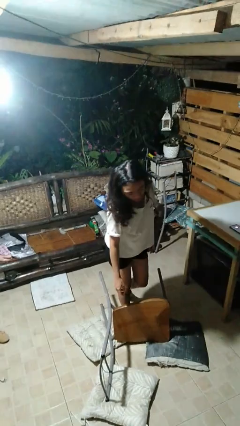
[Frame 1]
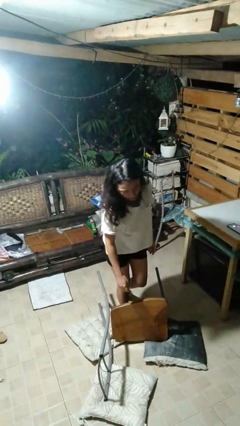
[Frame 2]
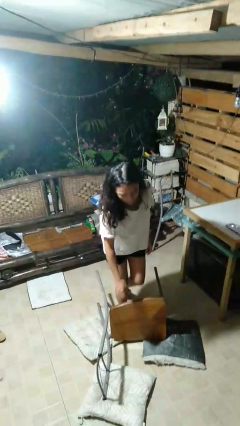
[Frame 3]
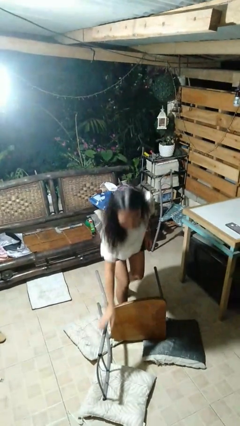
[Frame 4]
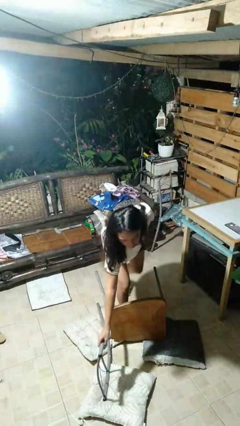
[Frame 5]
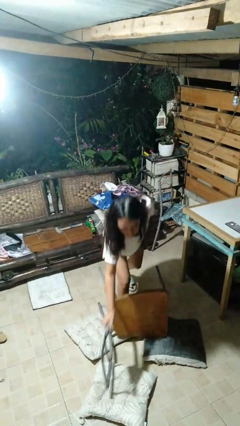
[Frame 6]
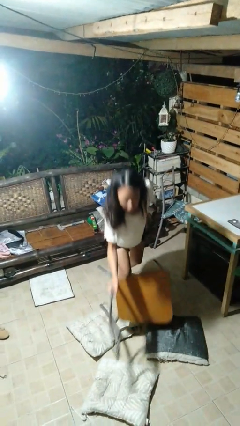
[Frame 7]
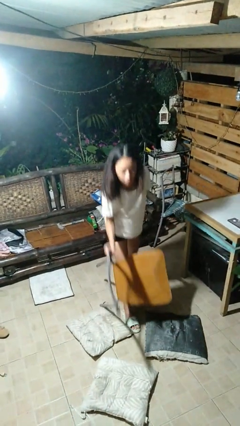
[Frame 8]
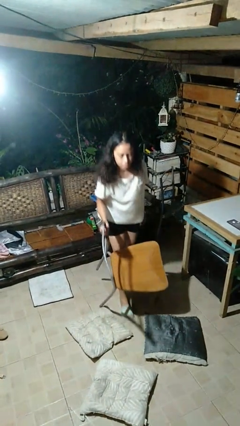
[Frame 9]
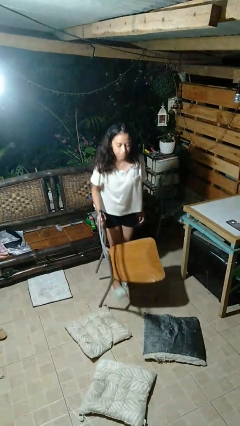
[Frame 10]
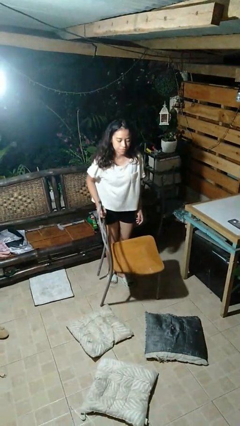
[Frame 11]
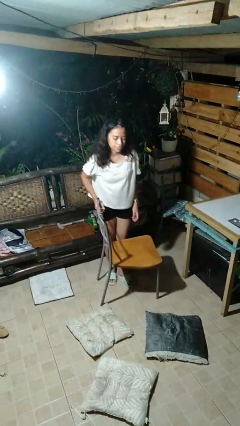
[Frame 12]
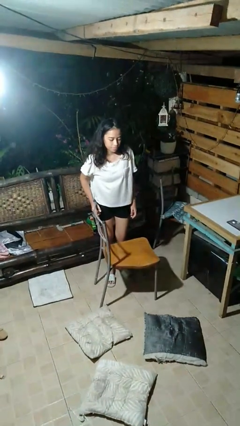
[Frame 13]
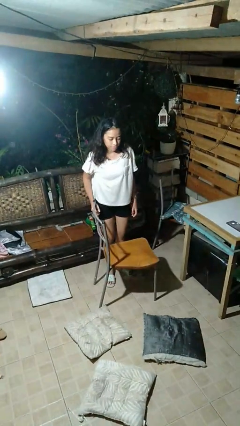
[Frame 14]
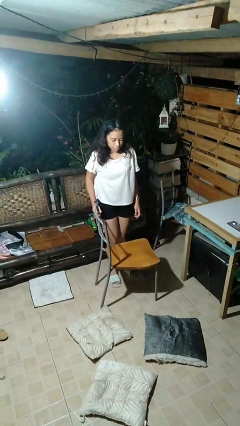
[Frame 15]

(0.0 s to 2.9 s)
person sets upright furniture

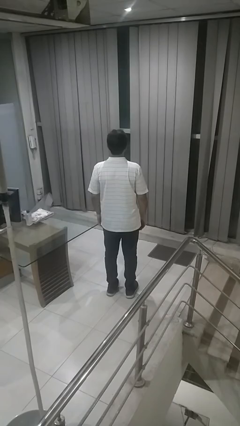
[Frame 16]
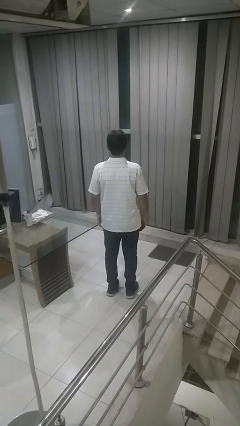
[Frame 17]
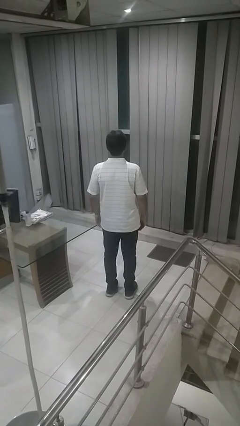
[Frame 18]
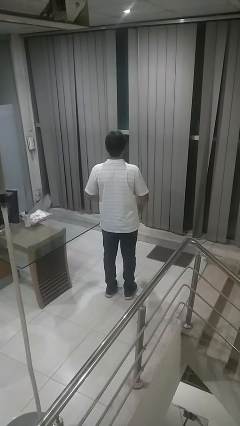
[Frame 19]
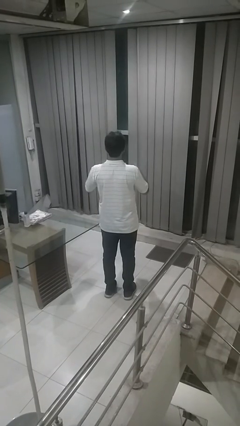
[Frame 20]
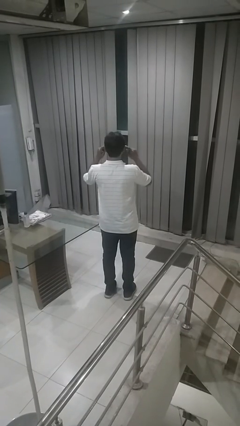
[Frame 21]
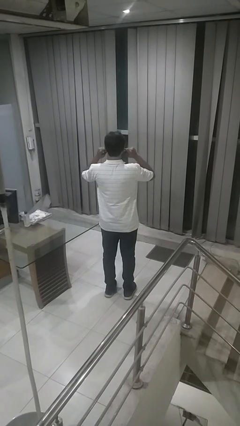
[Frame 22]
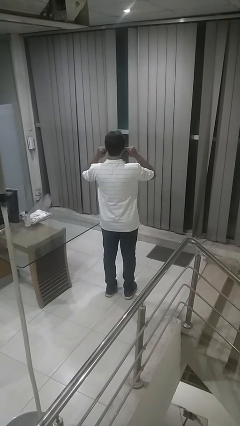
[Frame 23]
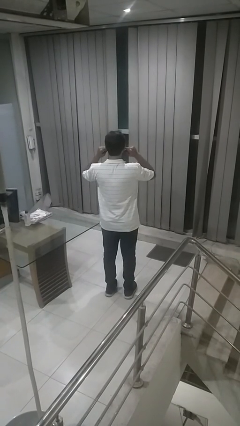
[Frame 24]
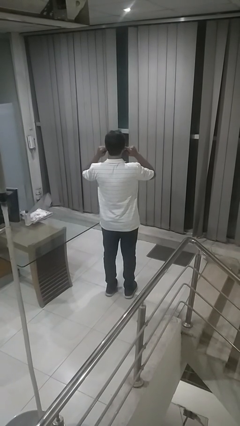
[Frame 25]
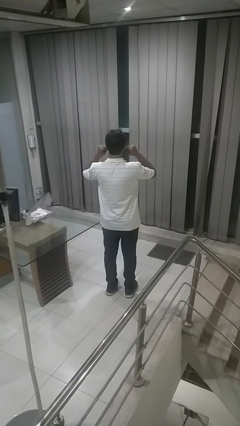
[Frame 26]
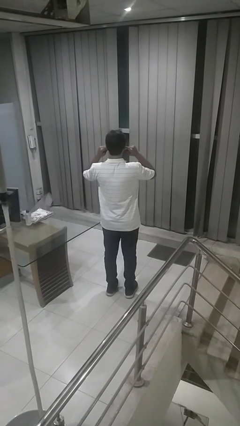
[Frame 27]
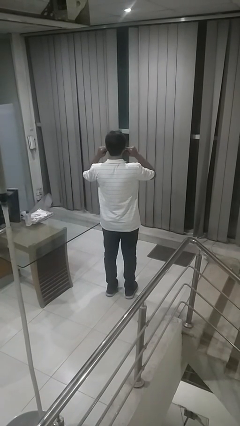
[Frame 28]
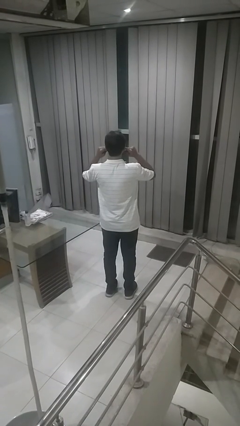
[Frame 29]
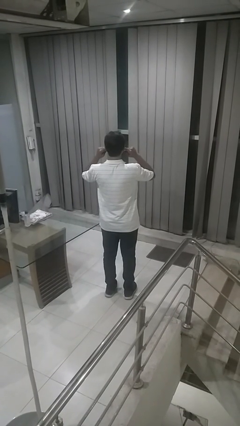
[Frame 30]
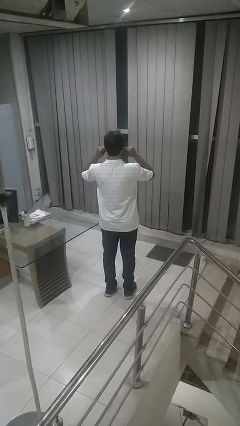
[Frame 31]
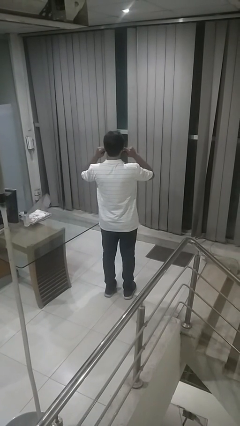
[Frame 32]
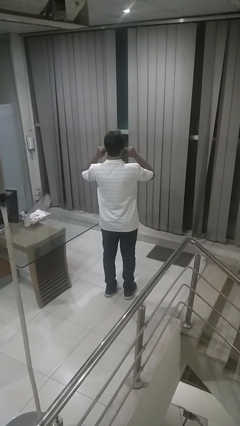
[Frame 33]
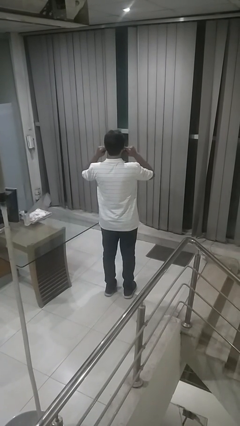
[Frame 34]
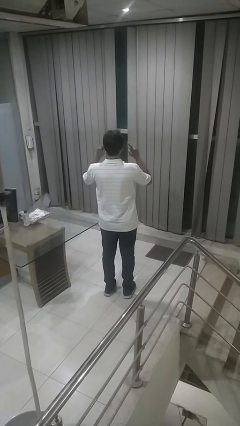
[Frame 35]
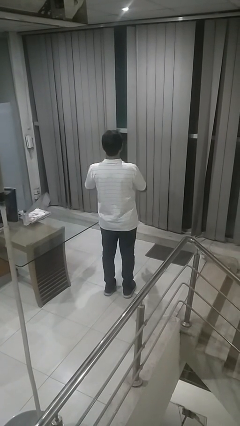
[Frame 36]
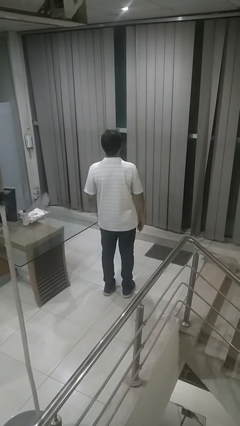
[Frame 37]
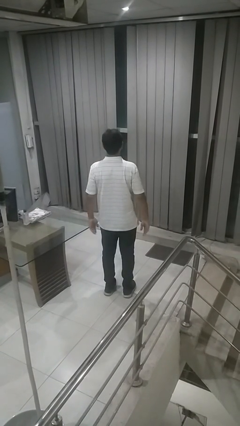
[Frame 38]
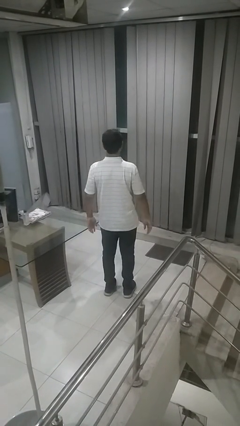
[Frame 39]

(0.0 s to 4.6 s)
person puts fingers in ear

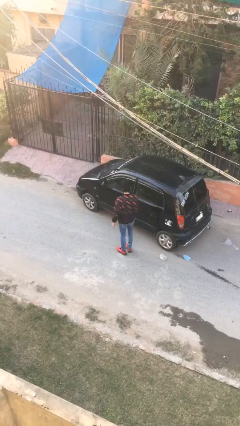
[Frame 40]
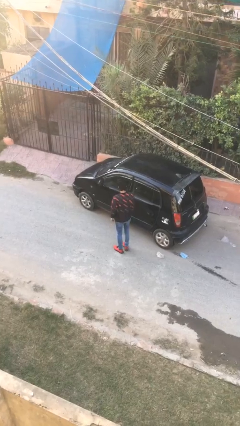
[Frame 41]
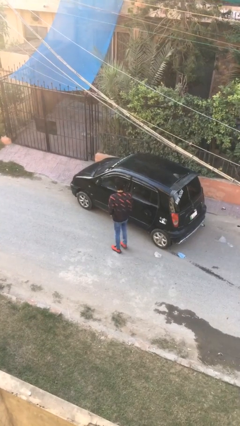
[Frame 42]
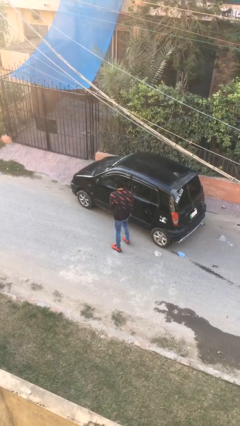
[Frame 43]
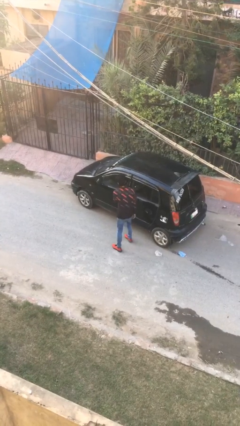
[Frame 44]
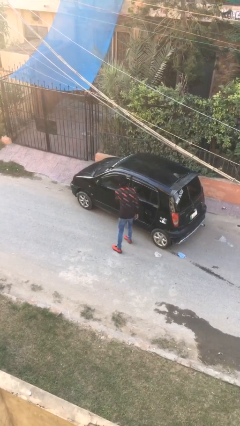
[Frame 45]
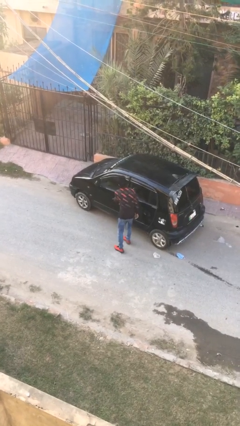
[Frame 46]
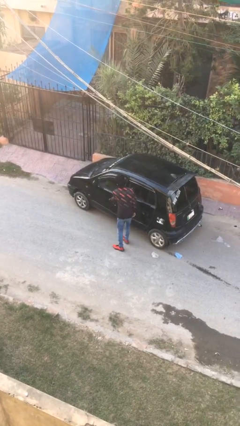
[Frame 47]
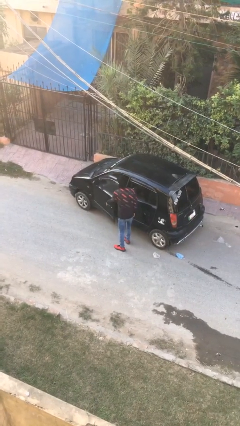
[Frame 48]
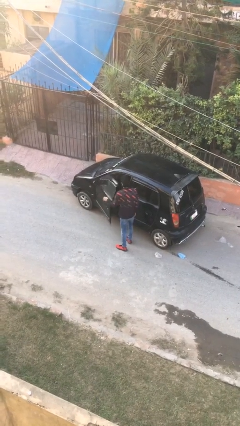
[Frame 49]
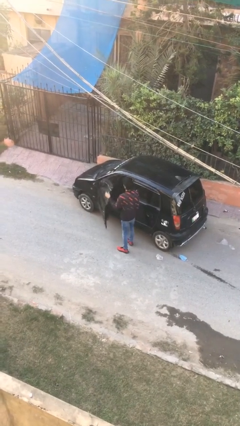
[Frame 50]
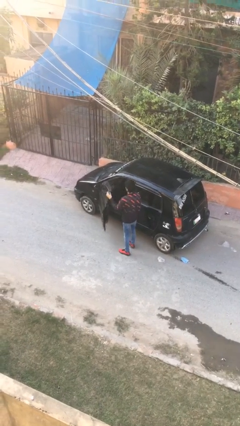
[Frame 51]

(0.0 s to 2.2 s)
person opens car door

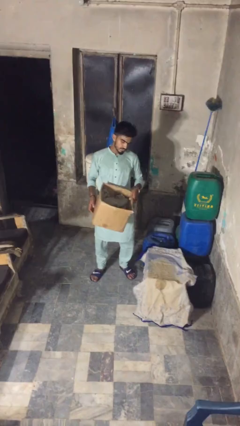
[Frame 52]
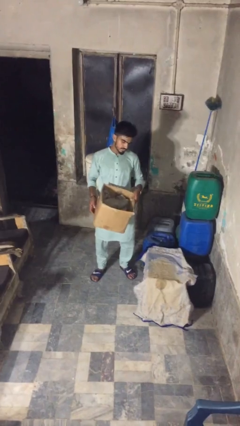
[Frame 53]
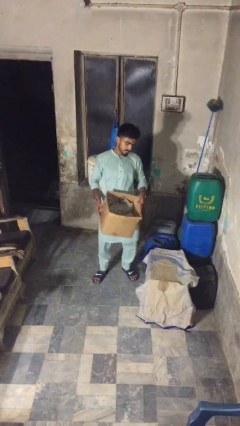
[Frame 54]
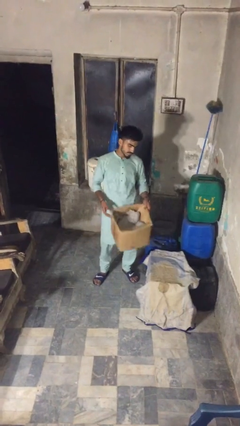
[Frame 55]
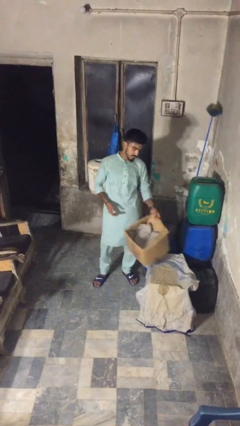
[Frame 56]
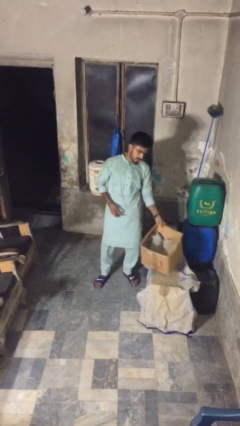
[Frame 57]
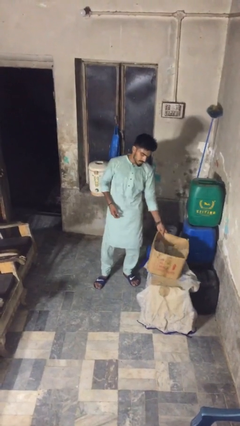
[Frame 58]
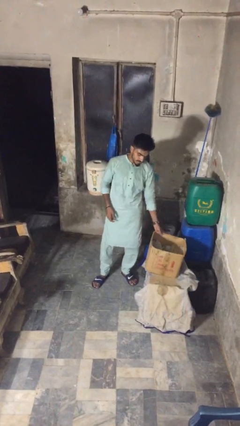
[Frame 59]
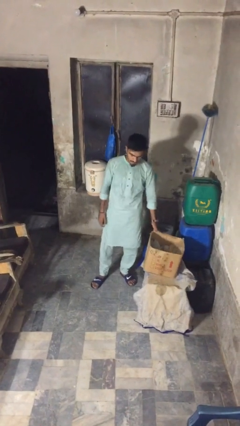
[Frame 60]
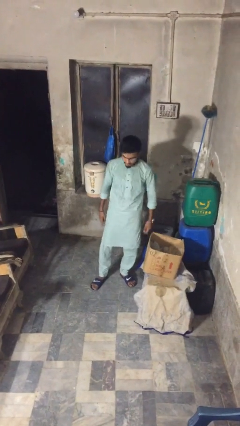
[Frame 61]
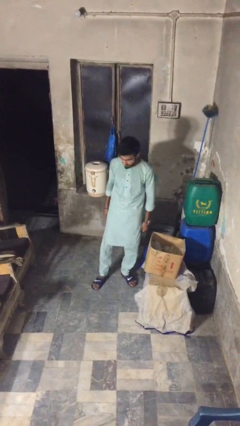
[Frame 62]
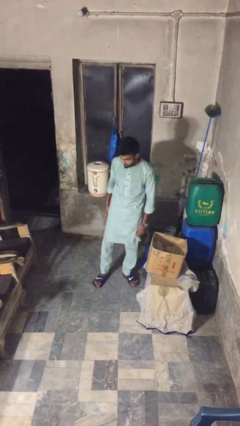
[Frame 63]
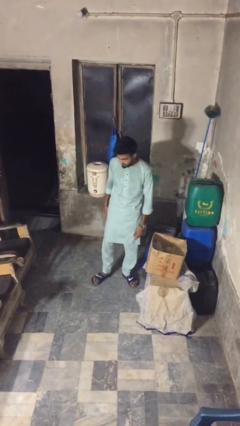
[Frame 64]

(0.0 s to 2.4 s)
person puts down object on table

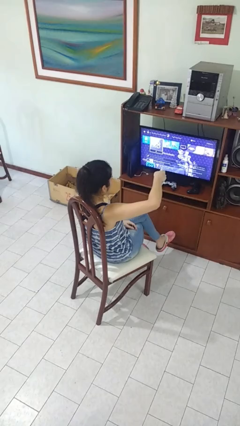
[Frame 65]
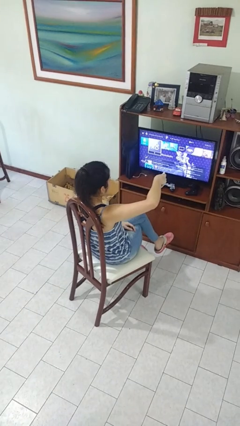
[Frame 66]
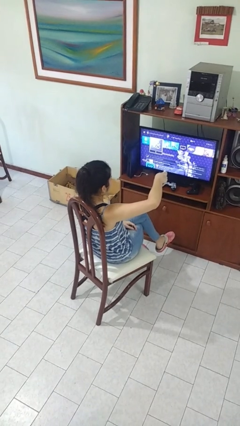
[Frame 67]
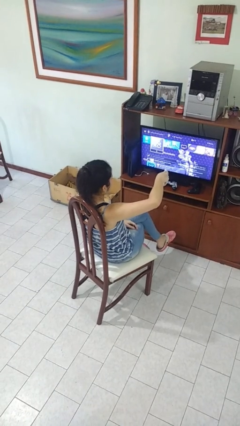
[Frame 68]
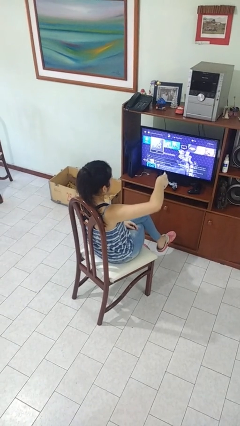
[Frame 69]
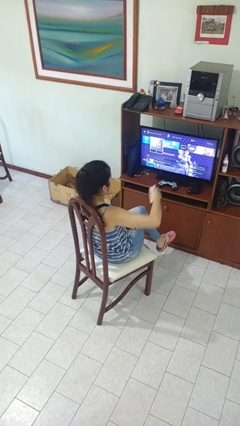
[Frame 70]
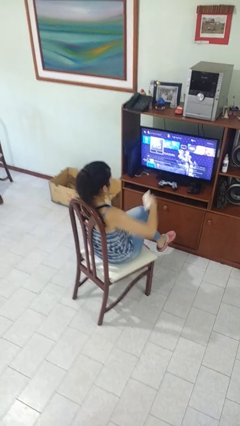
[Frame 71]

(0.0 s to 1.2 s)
person uses television remote

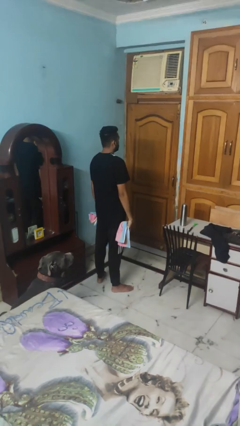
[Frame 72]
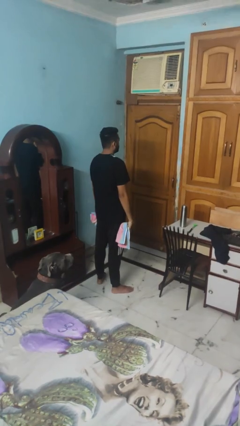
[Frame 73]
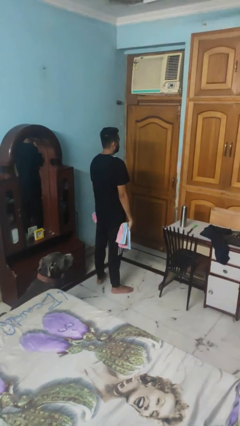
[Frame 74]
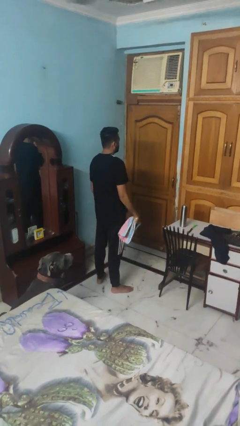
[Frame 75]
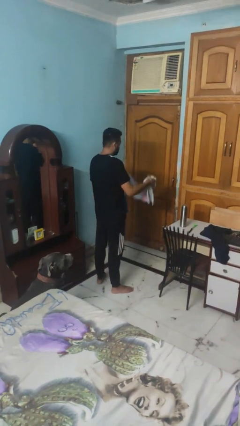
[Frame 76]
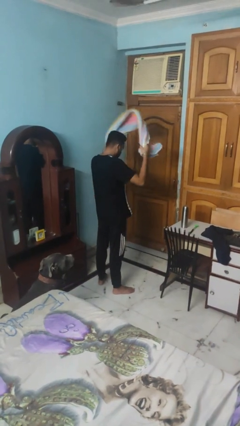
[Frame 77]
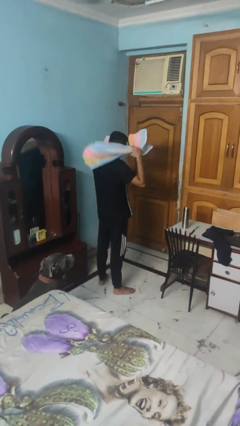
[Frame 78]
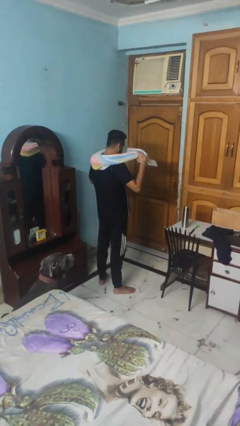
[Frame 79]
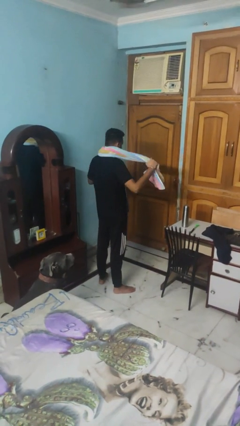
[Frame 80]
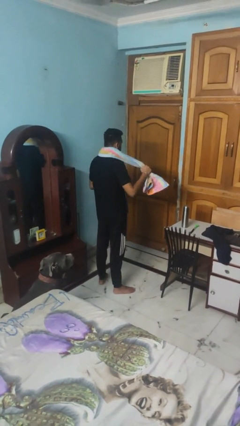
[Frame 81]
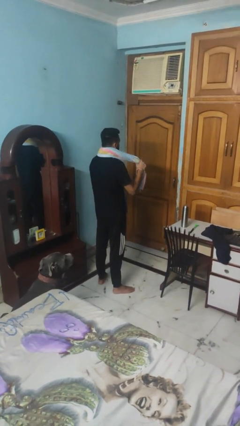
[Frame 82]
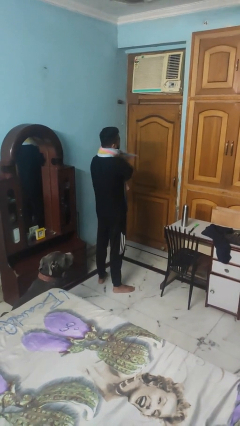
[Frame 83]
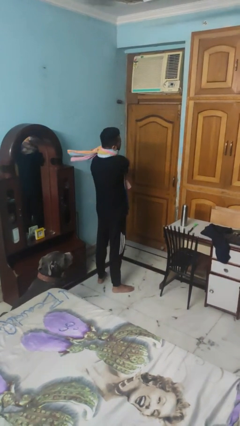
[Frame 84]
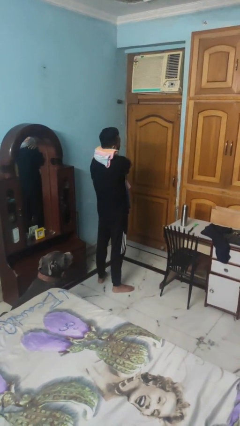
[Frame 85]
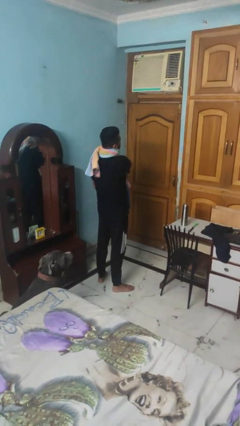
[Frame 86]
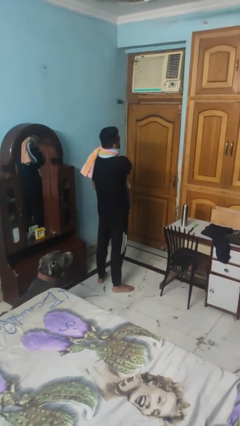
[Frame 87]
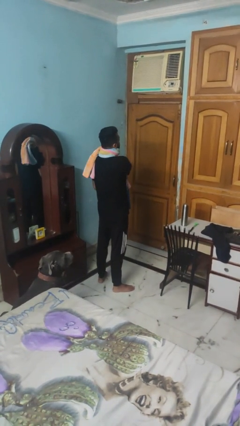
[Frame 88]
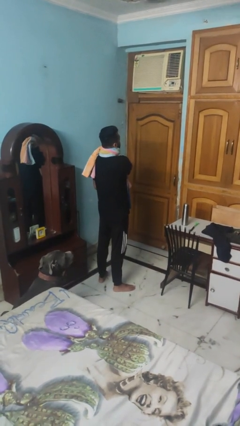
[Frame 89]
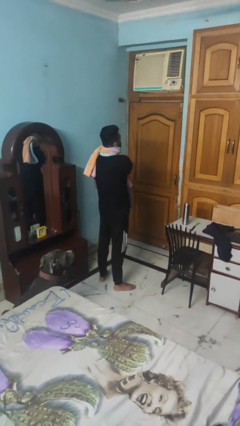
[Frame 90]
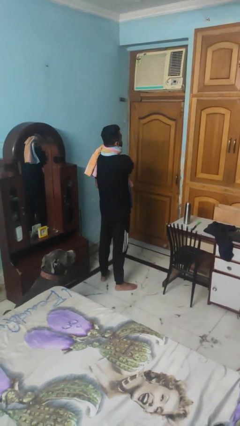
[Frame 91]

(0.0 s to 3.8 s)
person puts on scarf
